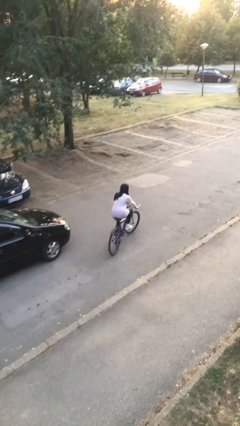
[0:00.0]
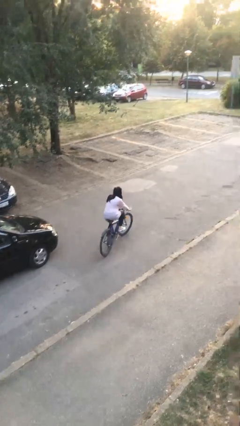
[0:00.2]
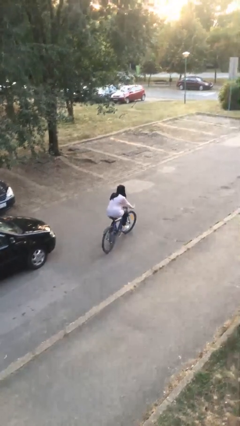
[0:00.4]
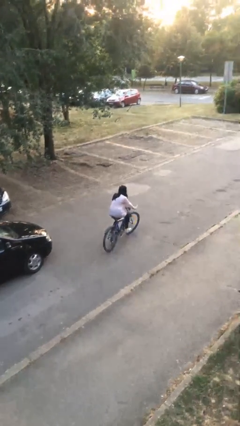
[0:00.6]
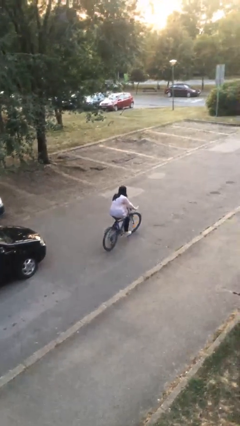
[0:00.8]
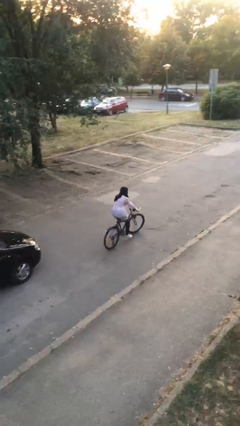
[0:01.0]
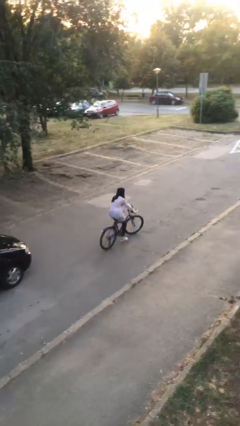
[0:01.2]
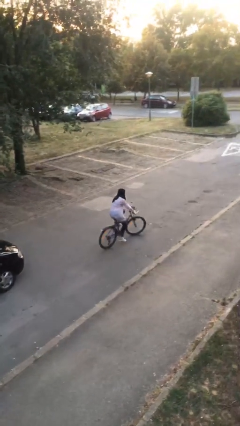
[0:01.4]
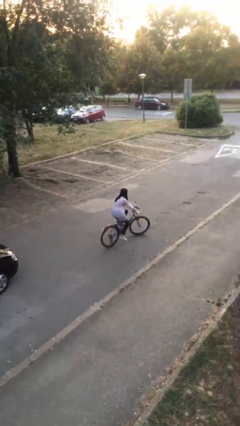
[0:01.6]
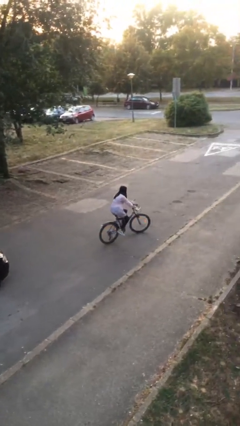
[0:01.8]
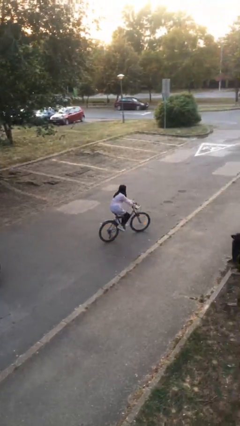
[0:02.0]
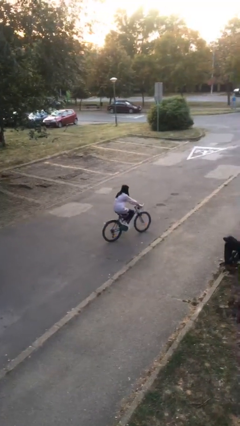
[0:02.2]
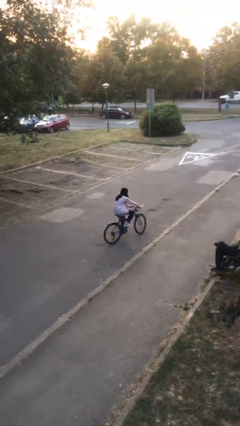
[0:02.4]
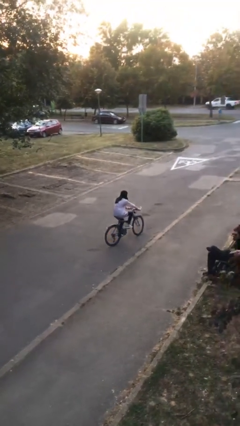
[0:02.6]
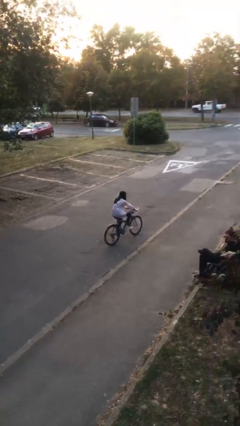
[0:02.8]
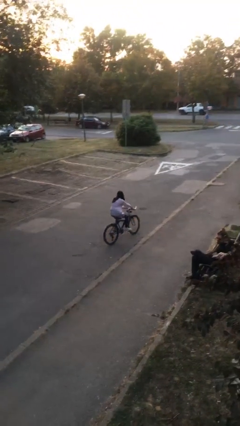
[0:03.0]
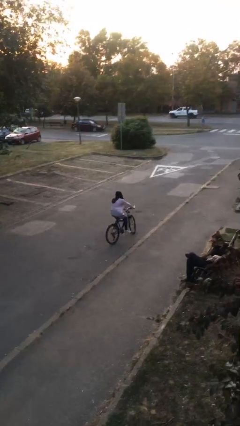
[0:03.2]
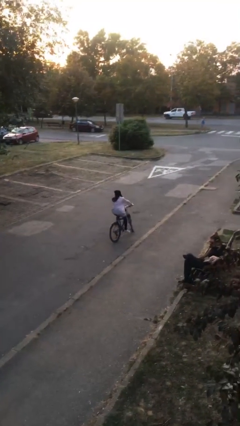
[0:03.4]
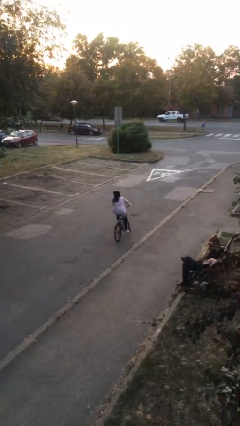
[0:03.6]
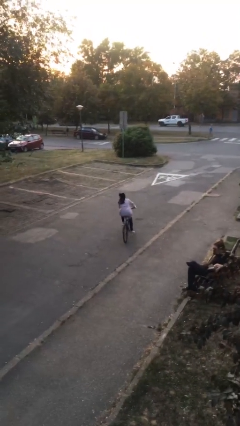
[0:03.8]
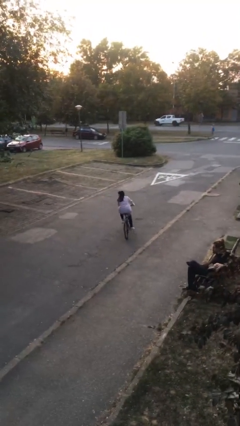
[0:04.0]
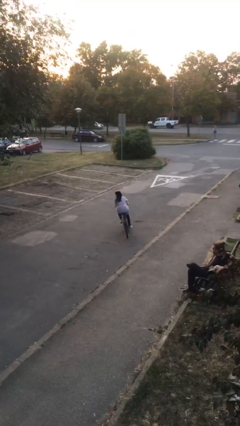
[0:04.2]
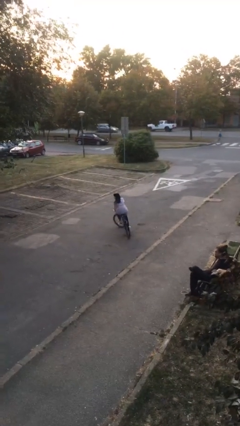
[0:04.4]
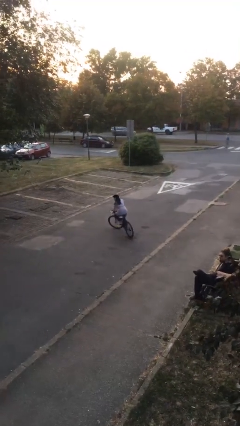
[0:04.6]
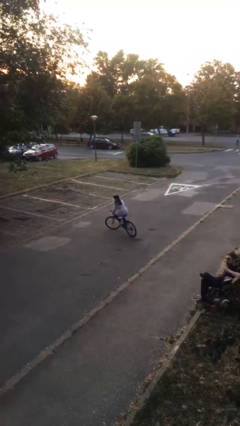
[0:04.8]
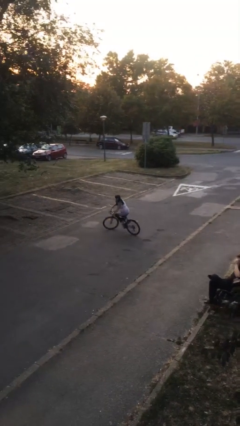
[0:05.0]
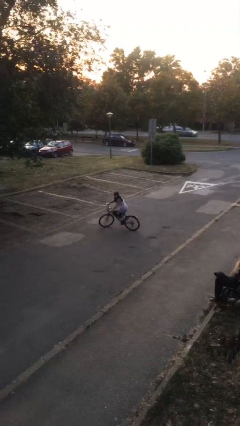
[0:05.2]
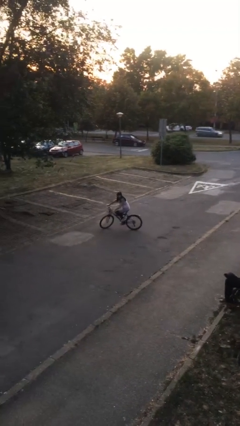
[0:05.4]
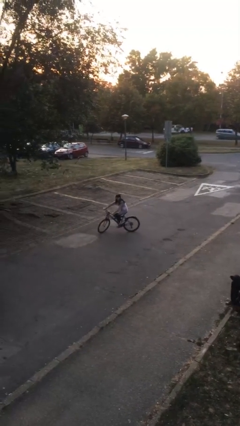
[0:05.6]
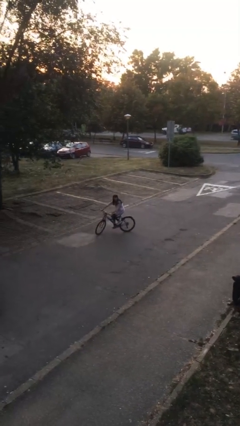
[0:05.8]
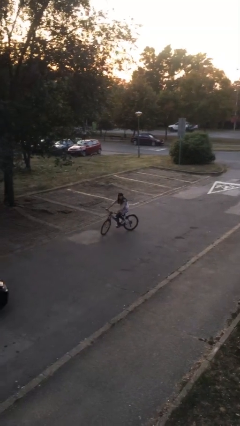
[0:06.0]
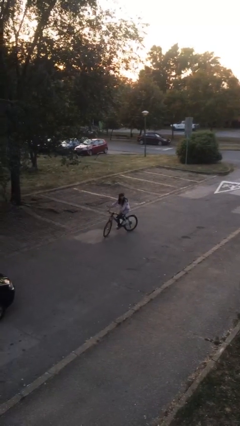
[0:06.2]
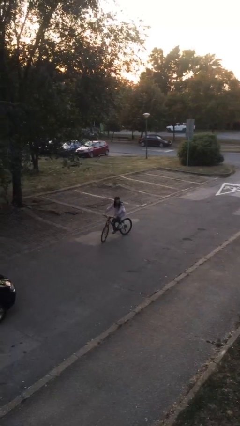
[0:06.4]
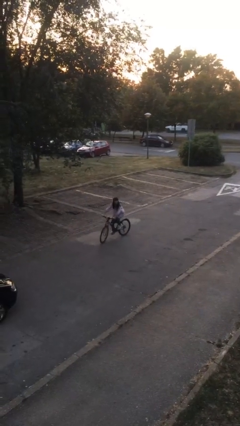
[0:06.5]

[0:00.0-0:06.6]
person rides bicycle

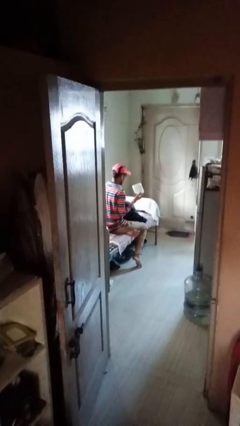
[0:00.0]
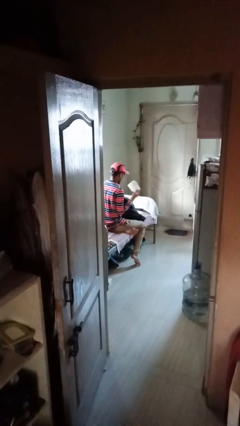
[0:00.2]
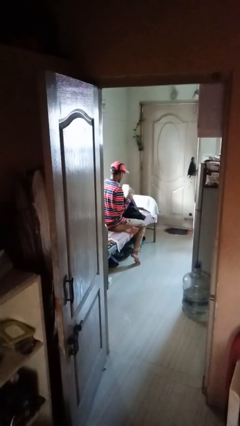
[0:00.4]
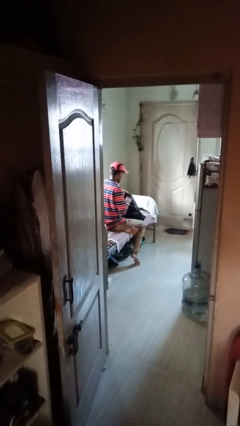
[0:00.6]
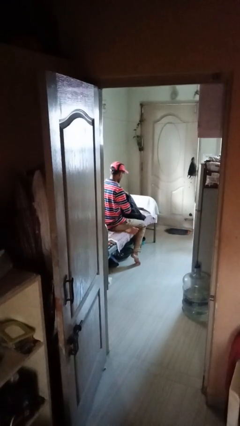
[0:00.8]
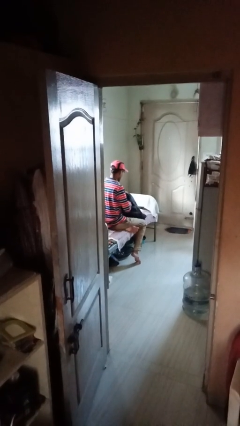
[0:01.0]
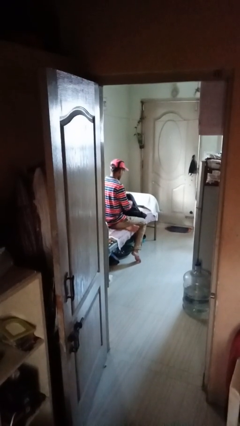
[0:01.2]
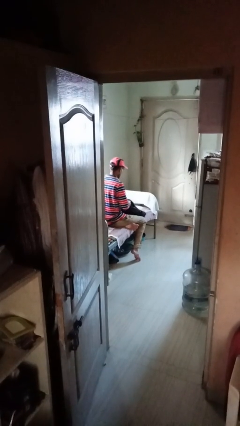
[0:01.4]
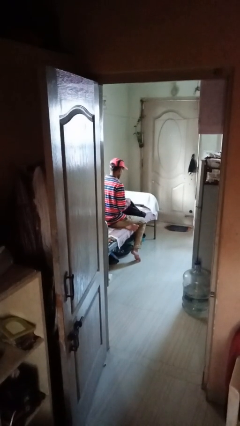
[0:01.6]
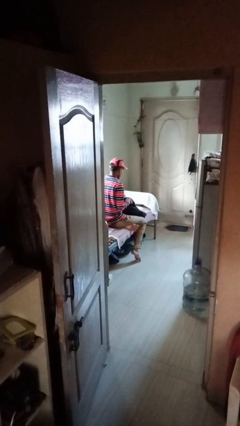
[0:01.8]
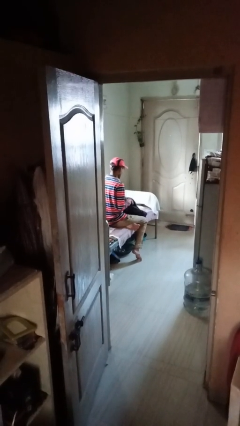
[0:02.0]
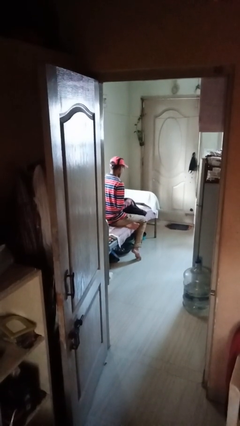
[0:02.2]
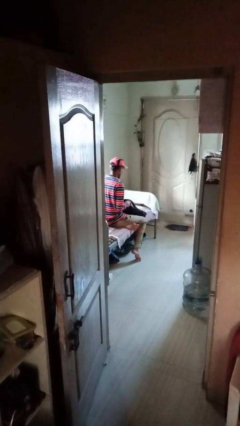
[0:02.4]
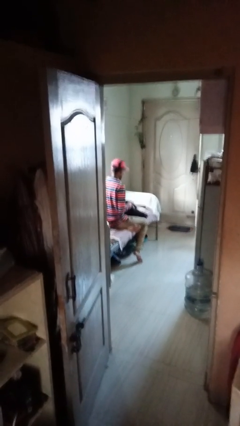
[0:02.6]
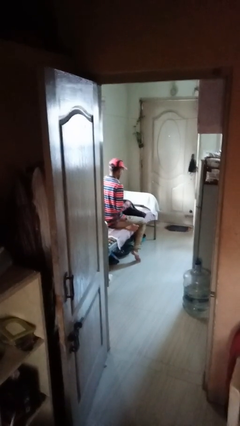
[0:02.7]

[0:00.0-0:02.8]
person puts object into backpack

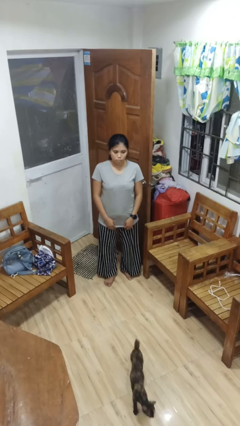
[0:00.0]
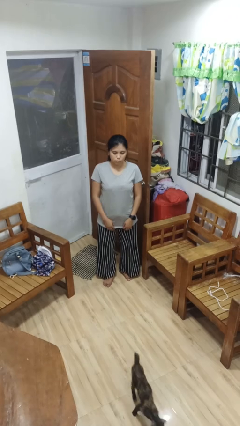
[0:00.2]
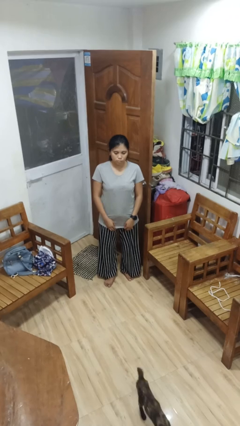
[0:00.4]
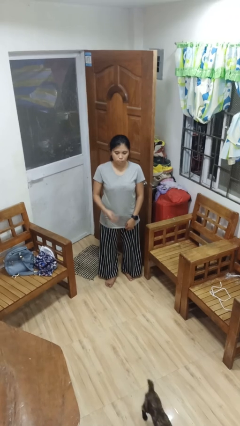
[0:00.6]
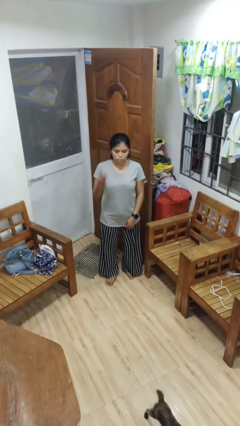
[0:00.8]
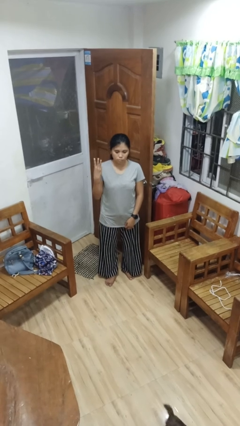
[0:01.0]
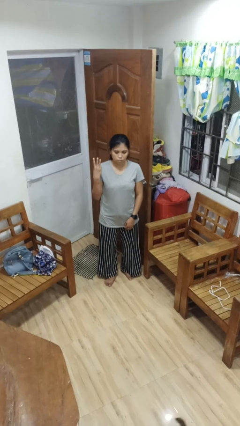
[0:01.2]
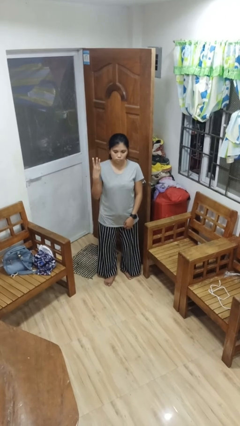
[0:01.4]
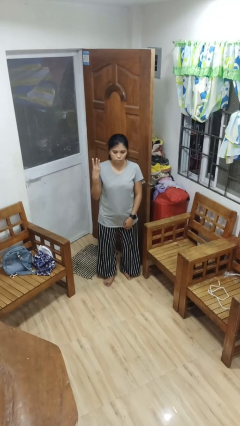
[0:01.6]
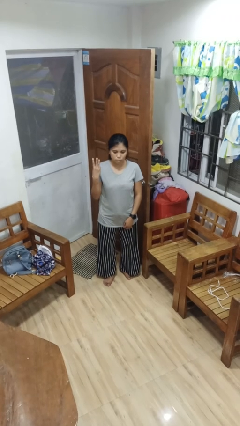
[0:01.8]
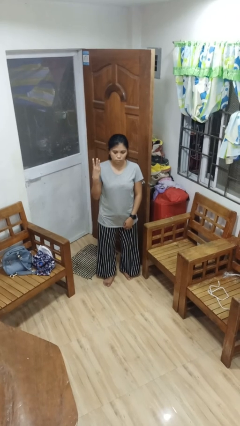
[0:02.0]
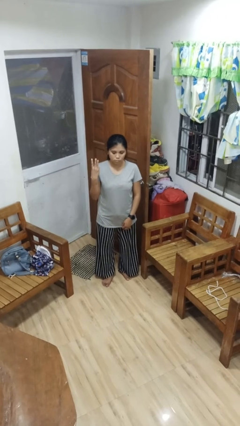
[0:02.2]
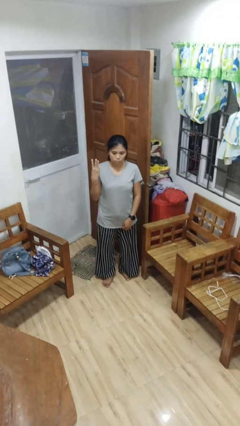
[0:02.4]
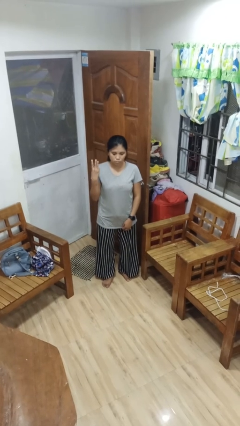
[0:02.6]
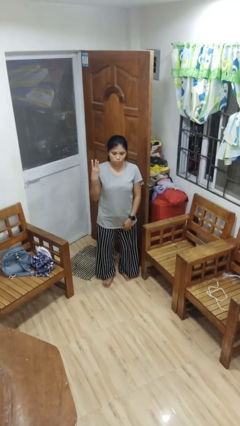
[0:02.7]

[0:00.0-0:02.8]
person gestures number three

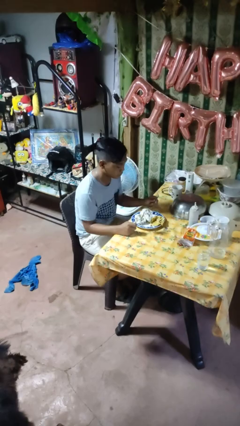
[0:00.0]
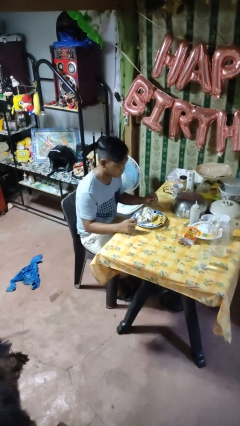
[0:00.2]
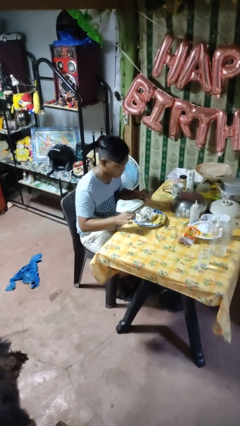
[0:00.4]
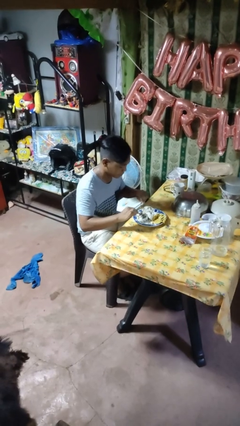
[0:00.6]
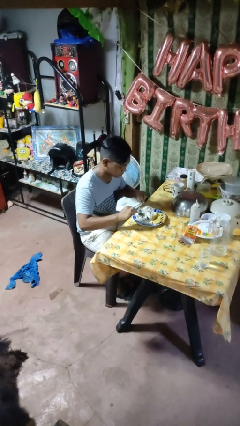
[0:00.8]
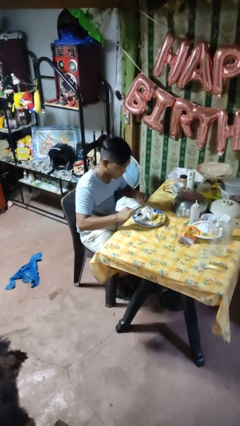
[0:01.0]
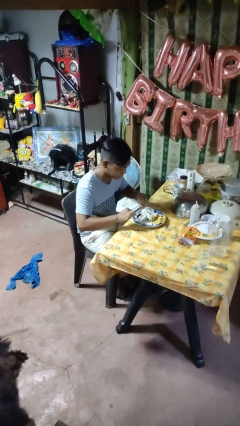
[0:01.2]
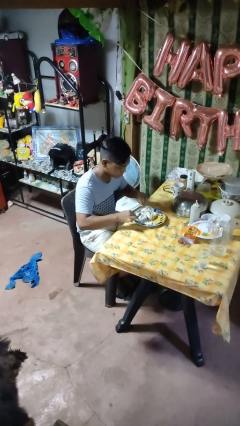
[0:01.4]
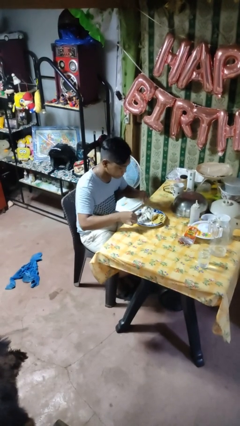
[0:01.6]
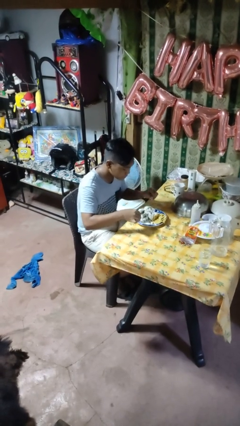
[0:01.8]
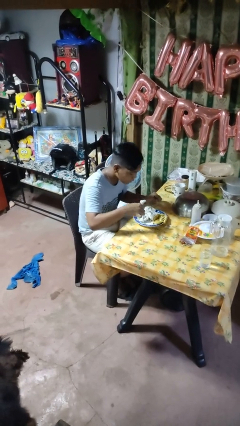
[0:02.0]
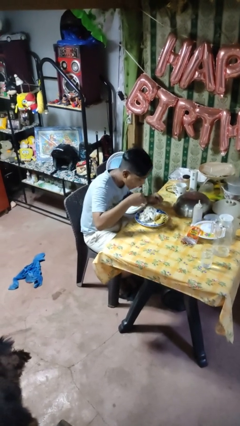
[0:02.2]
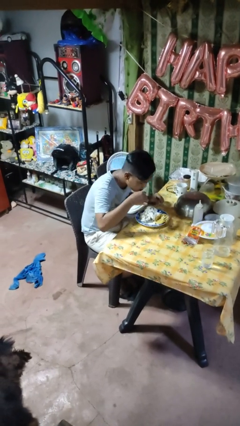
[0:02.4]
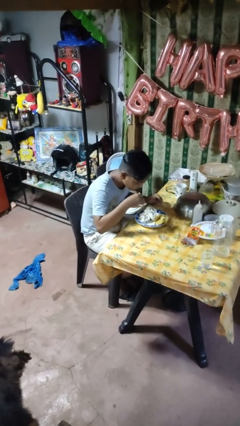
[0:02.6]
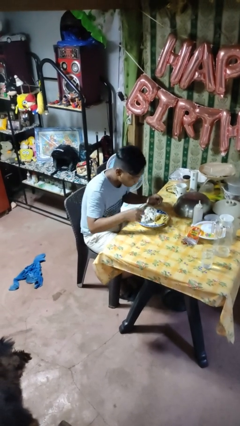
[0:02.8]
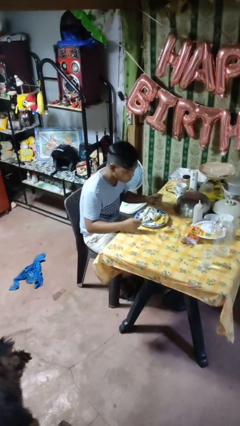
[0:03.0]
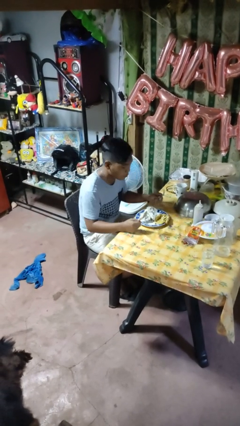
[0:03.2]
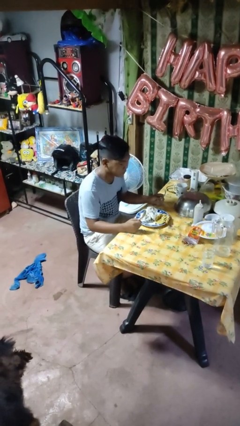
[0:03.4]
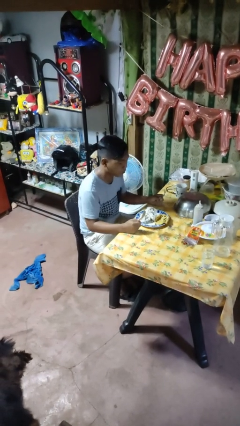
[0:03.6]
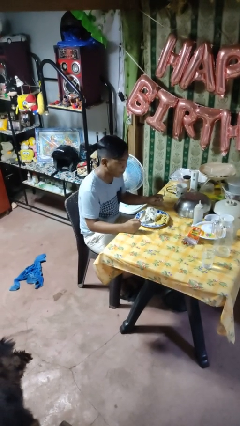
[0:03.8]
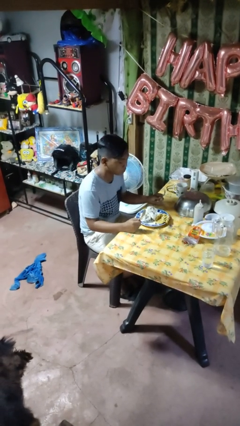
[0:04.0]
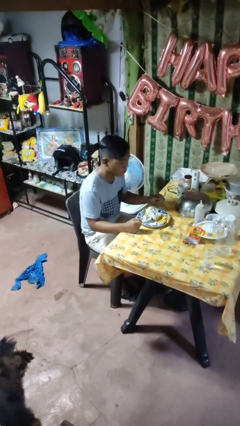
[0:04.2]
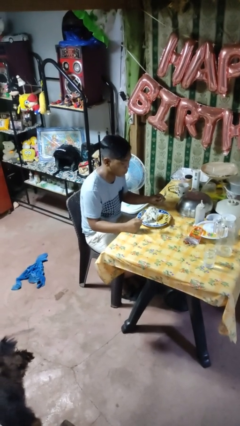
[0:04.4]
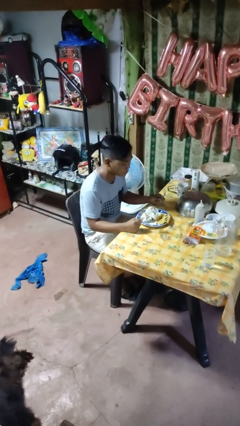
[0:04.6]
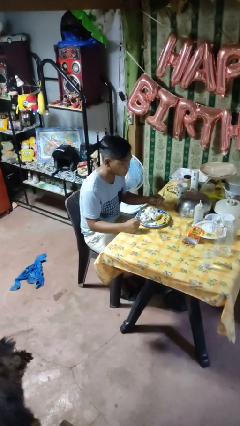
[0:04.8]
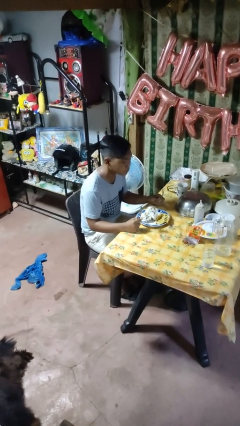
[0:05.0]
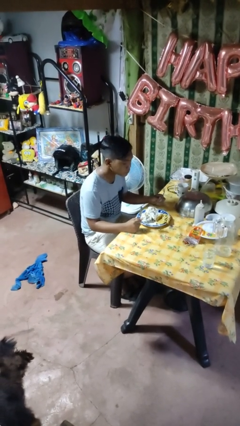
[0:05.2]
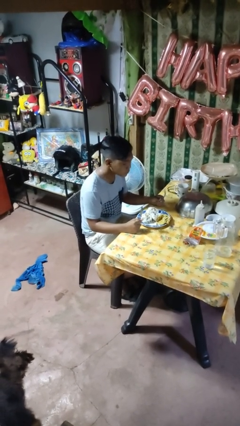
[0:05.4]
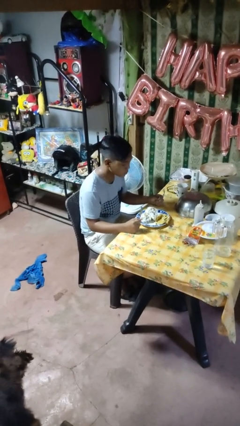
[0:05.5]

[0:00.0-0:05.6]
person eats with utensil
